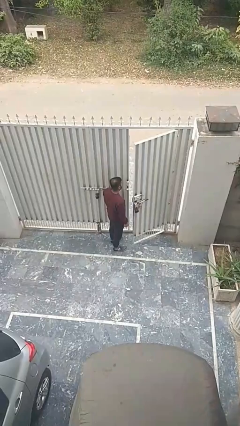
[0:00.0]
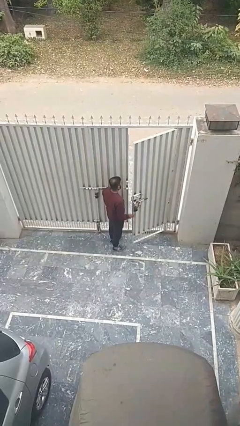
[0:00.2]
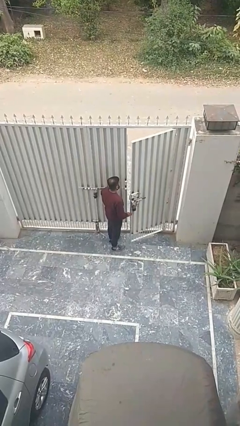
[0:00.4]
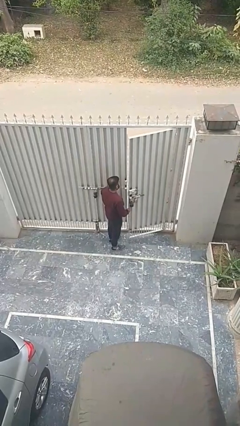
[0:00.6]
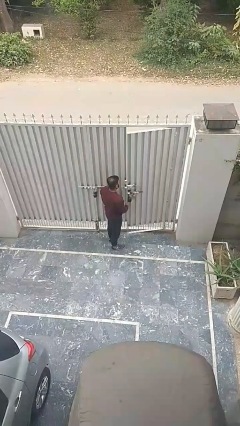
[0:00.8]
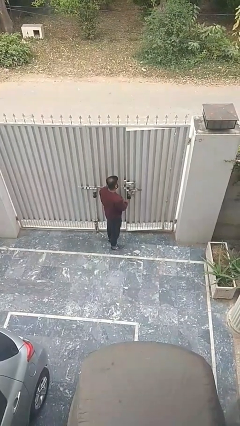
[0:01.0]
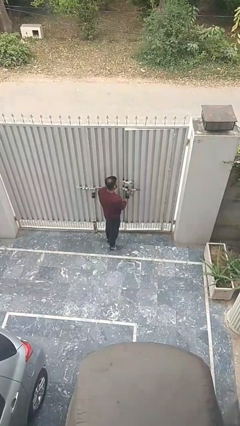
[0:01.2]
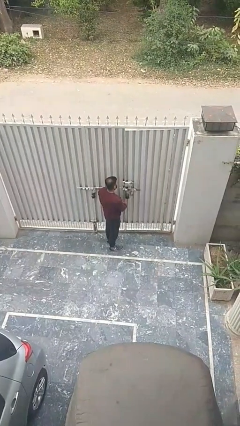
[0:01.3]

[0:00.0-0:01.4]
person closes facility door

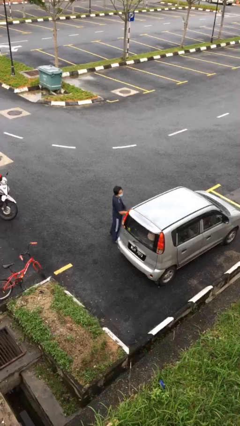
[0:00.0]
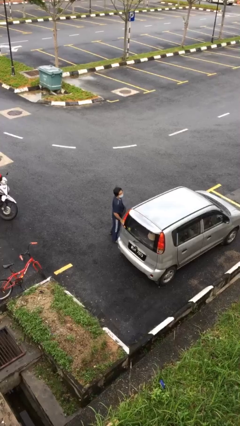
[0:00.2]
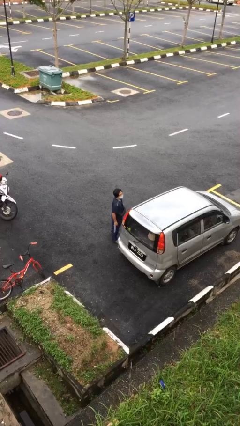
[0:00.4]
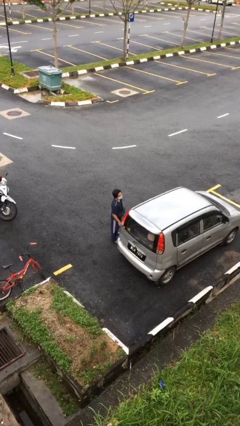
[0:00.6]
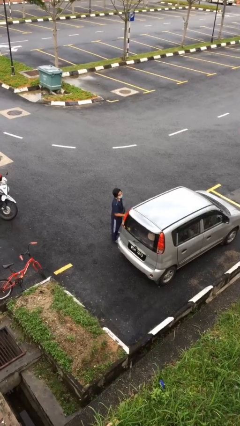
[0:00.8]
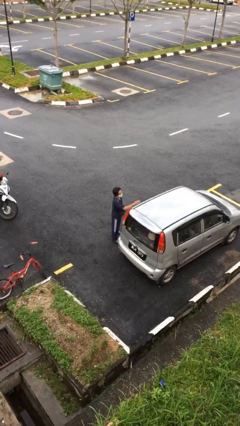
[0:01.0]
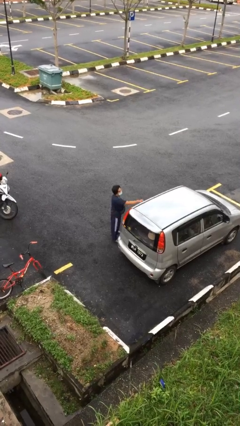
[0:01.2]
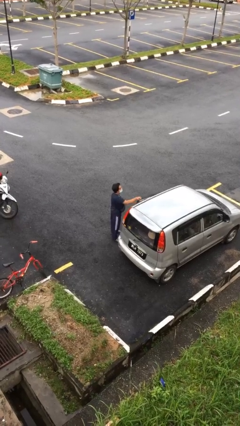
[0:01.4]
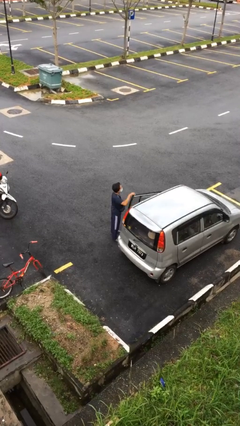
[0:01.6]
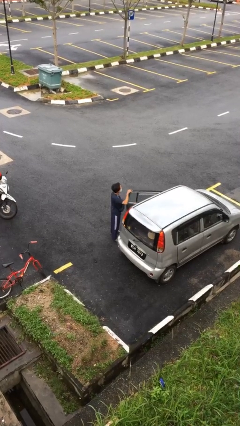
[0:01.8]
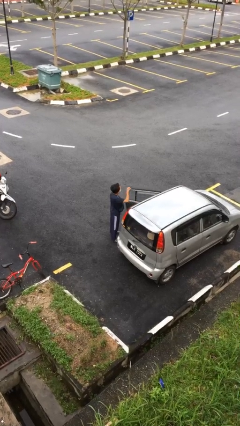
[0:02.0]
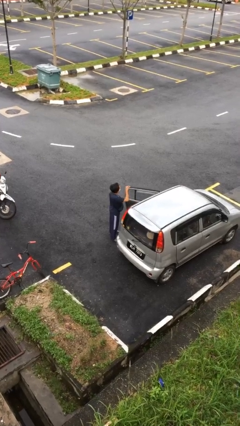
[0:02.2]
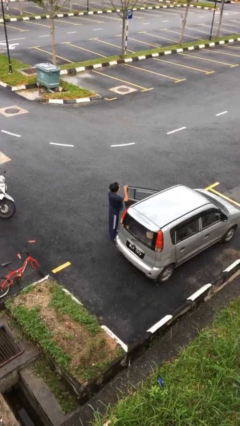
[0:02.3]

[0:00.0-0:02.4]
person opens car door

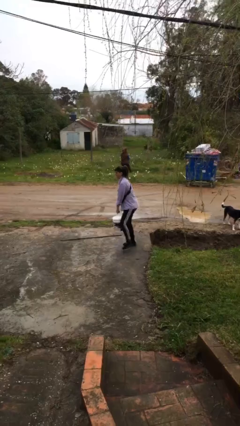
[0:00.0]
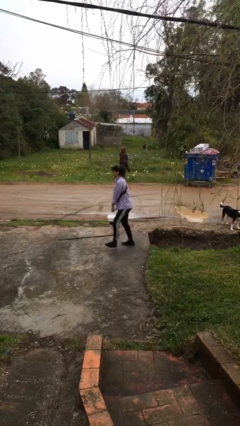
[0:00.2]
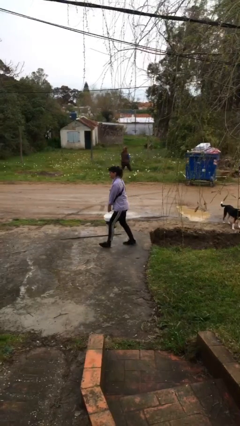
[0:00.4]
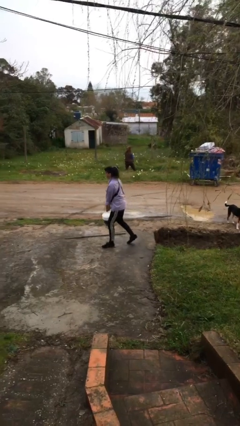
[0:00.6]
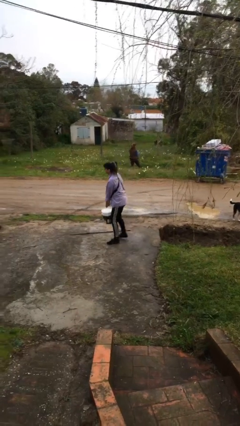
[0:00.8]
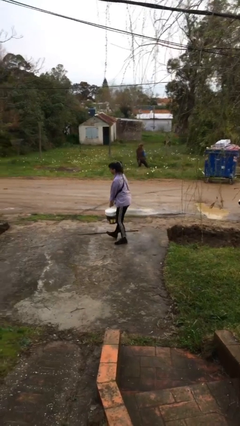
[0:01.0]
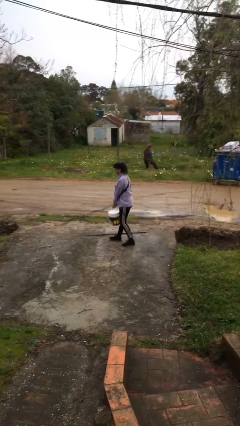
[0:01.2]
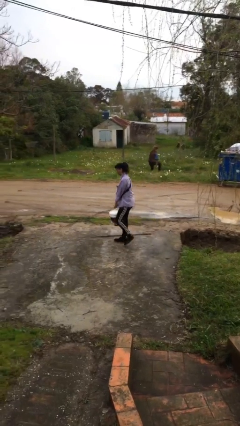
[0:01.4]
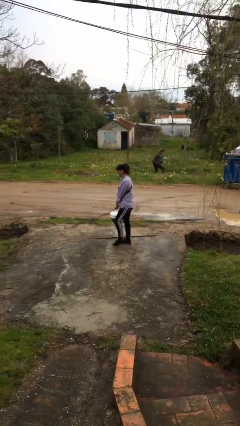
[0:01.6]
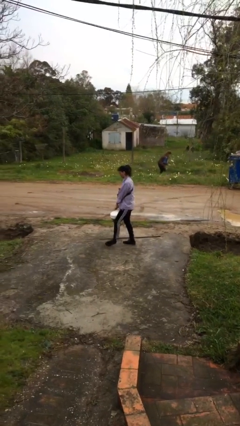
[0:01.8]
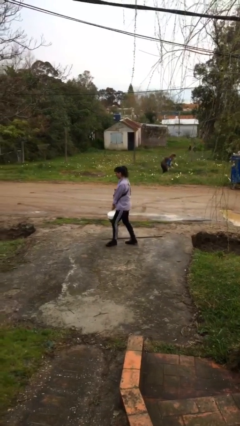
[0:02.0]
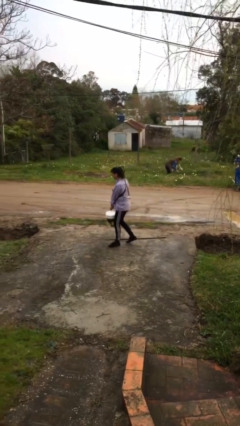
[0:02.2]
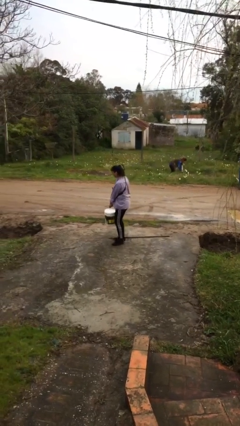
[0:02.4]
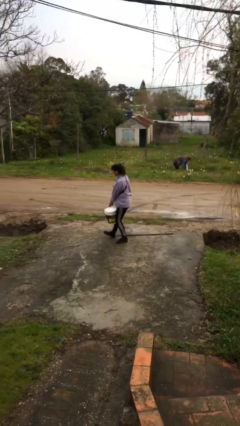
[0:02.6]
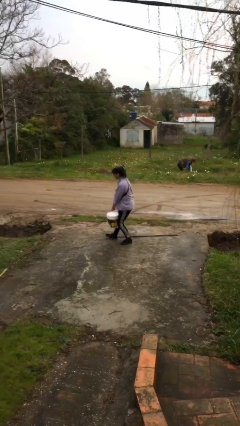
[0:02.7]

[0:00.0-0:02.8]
person carries heavy object

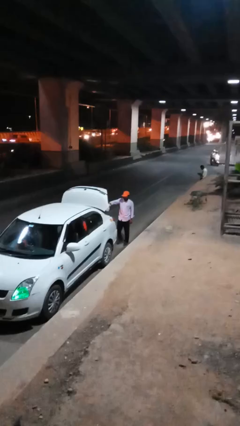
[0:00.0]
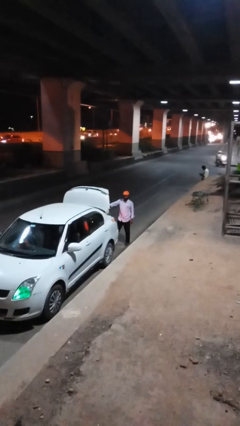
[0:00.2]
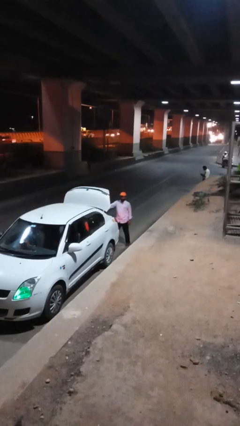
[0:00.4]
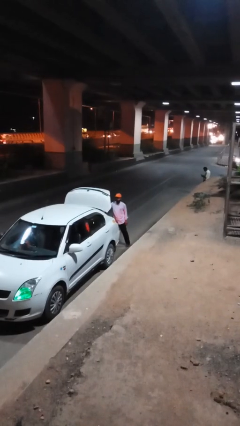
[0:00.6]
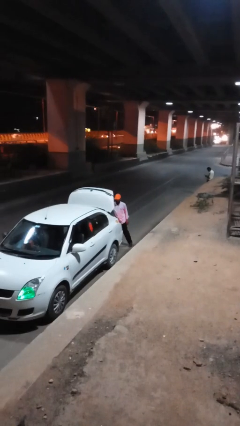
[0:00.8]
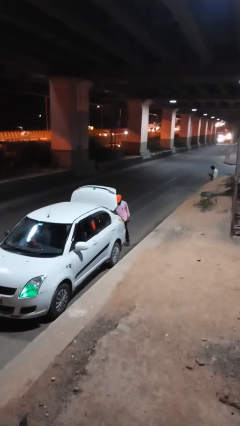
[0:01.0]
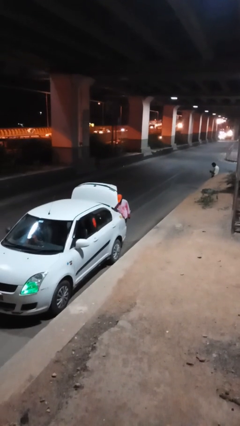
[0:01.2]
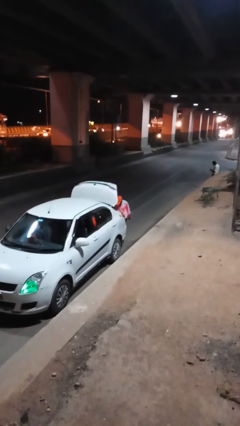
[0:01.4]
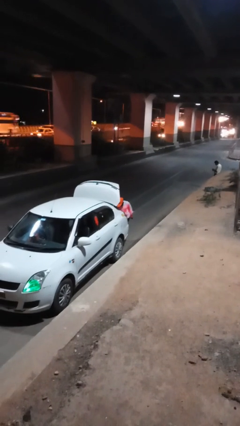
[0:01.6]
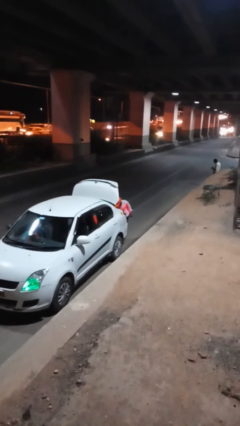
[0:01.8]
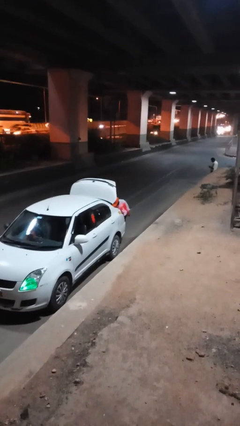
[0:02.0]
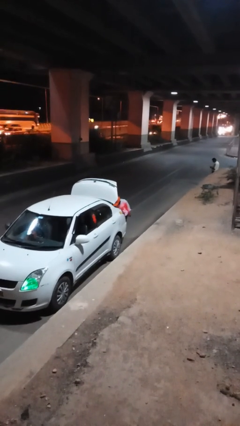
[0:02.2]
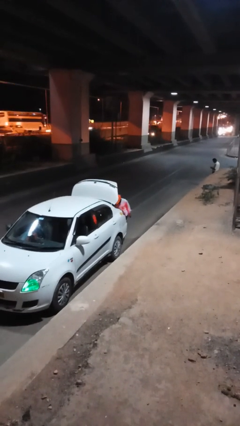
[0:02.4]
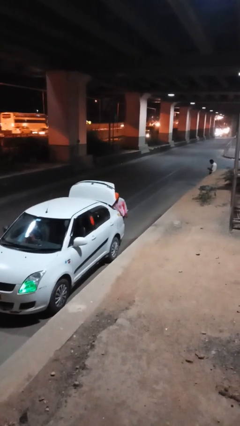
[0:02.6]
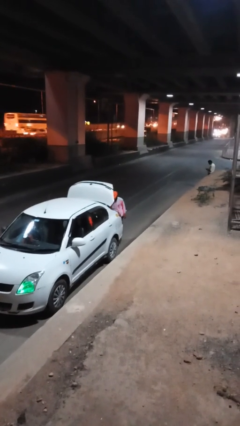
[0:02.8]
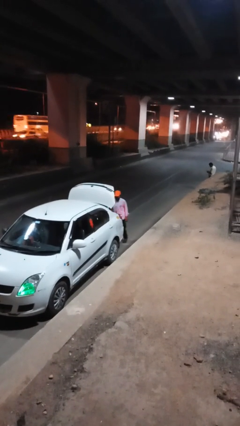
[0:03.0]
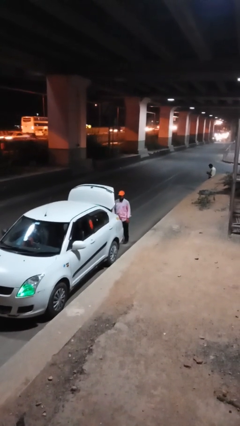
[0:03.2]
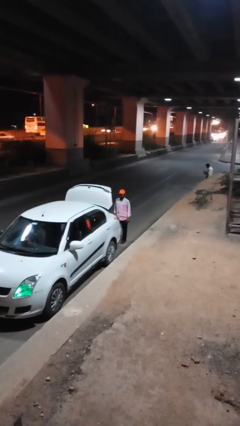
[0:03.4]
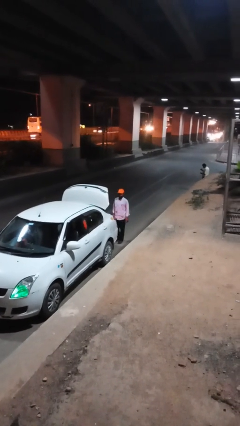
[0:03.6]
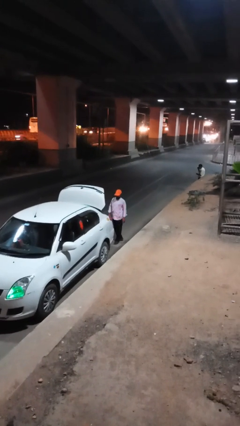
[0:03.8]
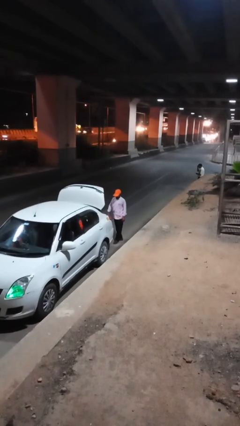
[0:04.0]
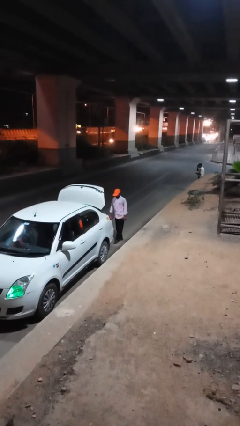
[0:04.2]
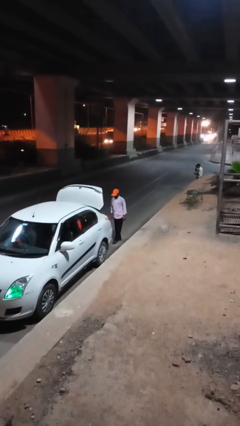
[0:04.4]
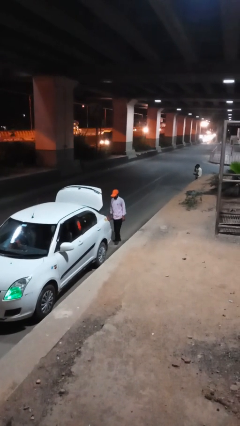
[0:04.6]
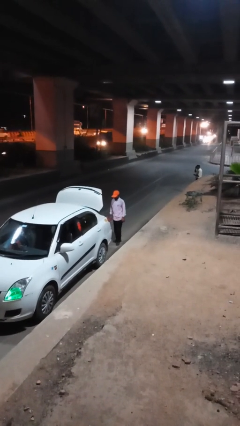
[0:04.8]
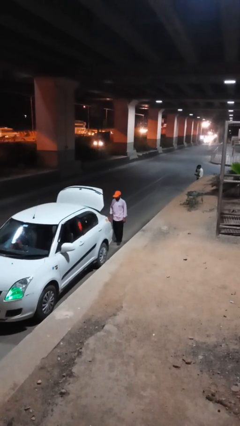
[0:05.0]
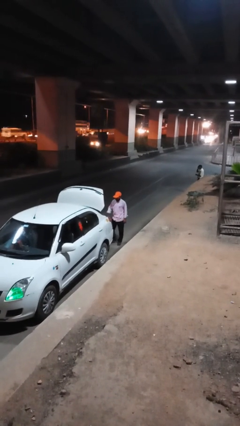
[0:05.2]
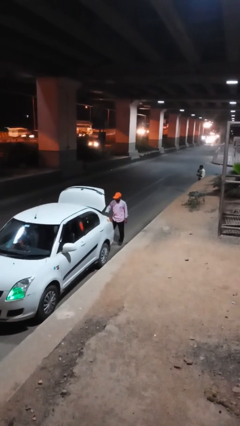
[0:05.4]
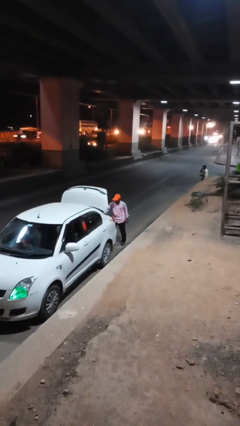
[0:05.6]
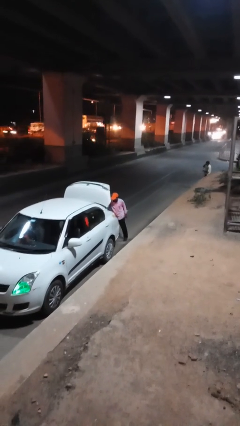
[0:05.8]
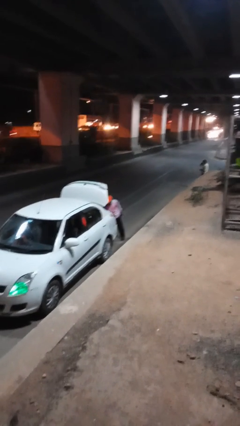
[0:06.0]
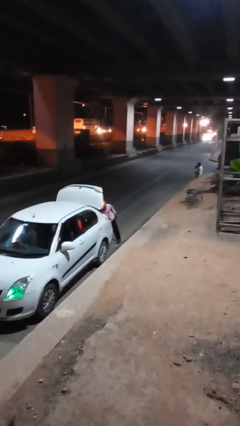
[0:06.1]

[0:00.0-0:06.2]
person loads car

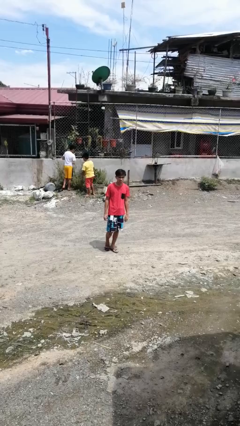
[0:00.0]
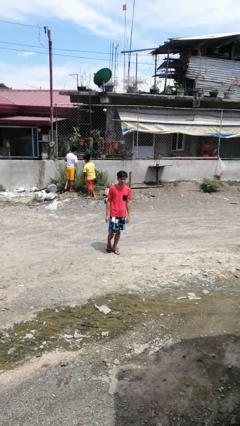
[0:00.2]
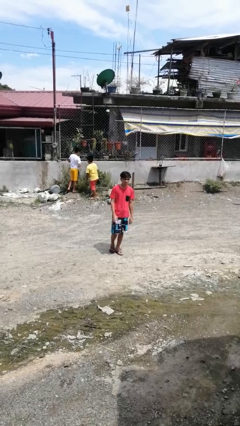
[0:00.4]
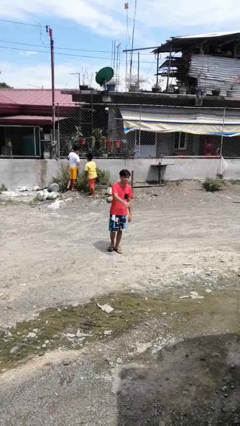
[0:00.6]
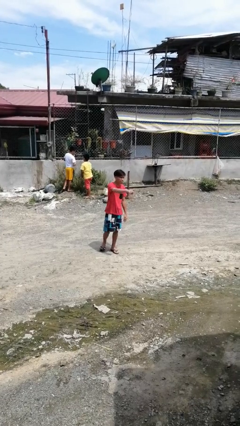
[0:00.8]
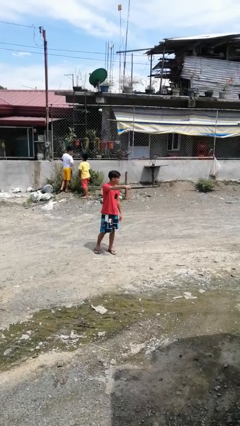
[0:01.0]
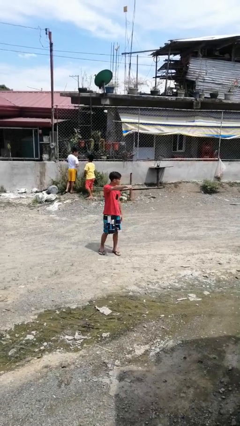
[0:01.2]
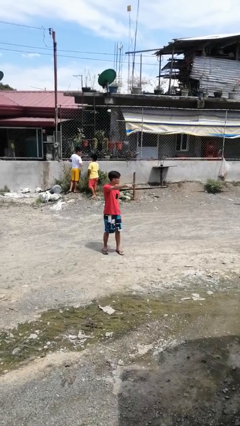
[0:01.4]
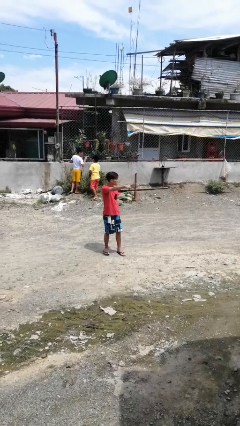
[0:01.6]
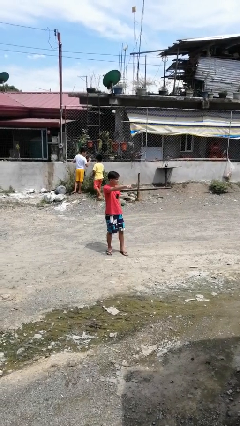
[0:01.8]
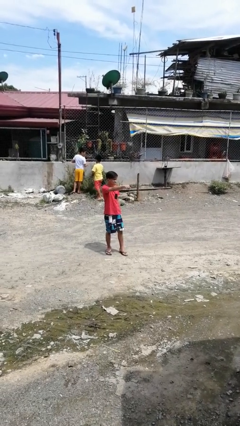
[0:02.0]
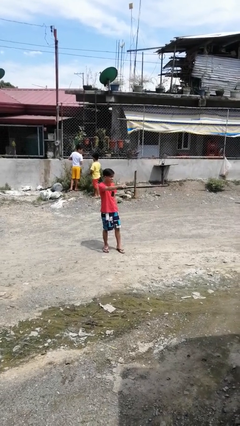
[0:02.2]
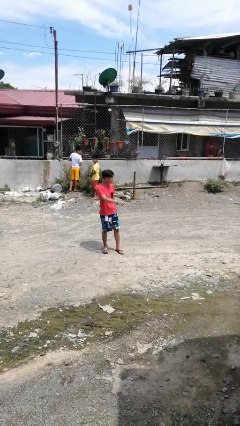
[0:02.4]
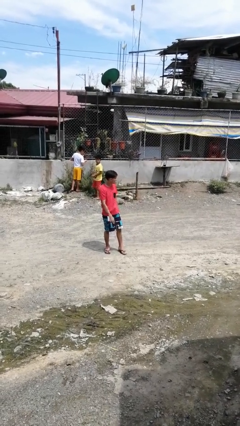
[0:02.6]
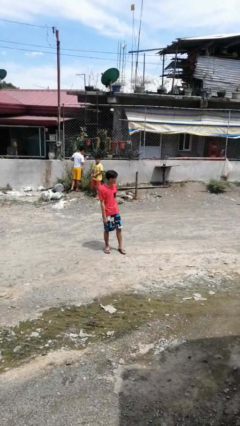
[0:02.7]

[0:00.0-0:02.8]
person points at person

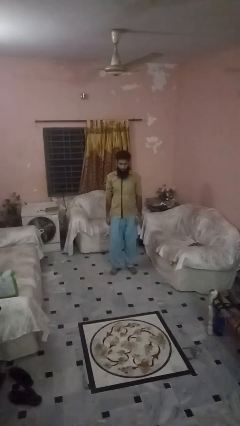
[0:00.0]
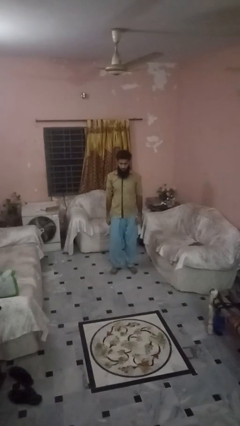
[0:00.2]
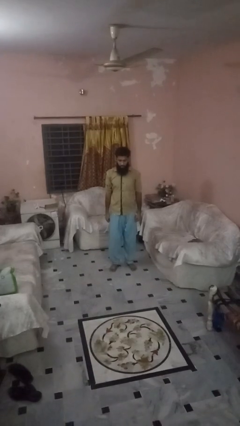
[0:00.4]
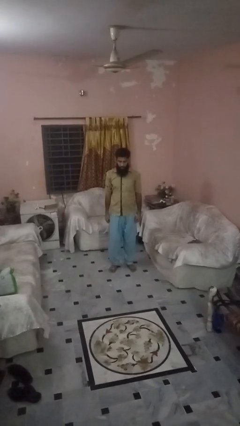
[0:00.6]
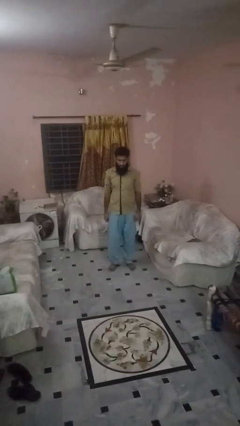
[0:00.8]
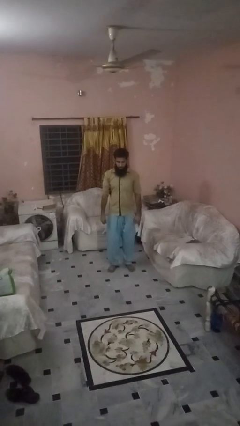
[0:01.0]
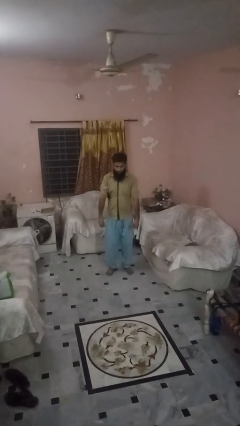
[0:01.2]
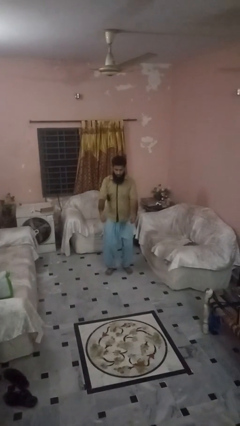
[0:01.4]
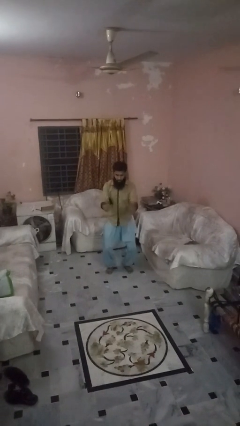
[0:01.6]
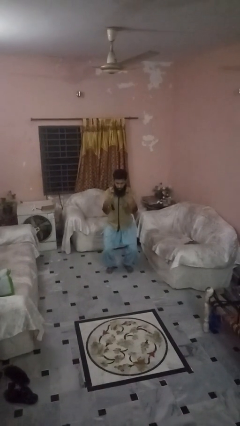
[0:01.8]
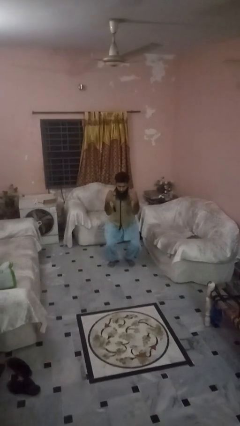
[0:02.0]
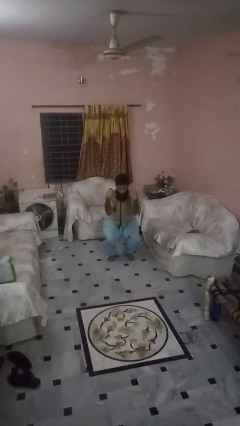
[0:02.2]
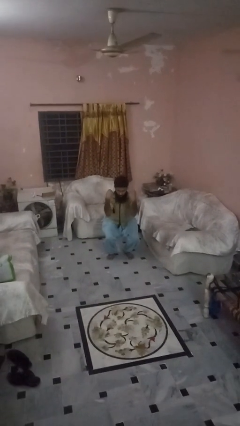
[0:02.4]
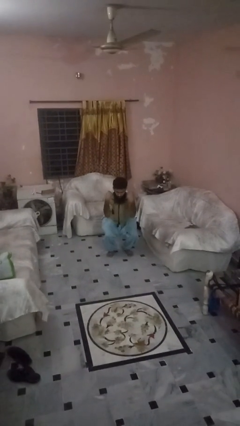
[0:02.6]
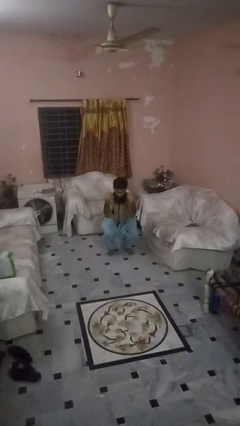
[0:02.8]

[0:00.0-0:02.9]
person squats
